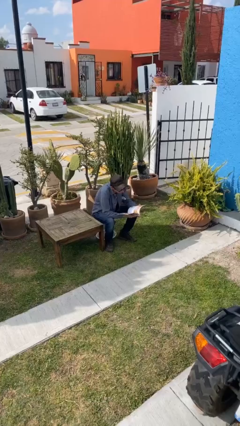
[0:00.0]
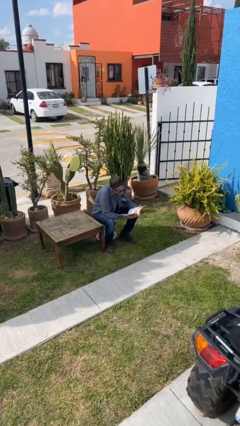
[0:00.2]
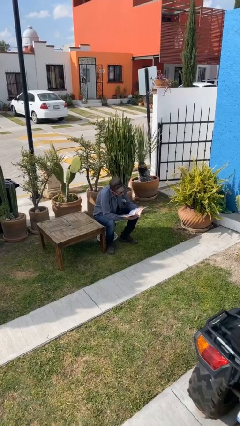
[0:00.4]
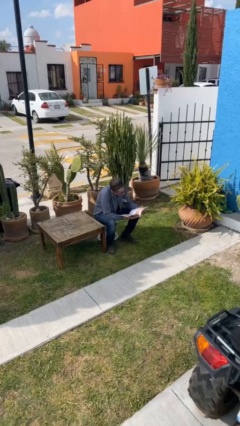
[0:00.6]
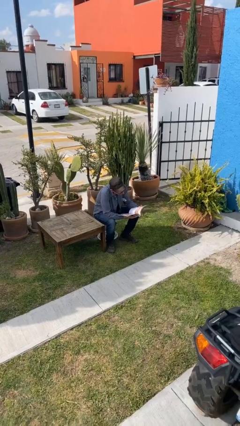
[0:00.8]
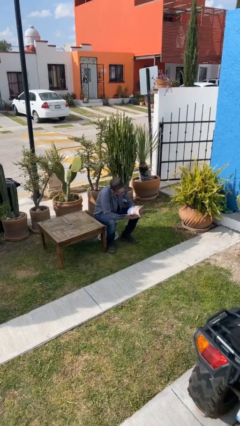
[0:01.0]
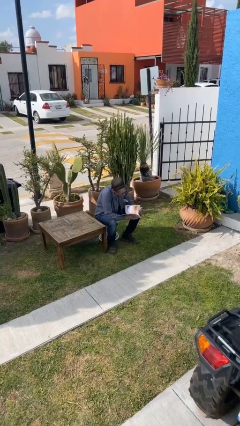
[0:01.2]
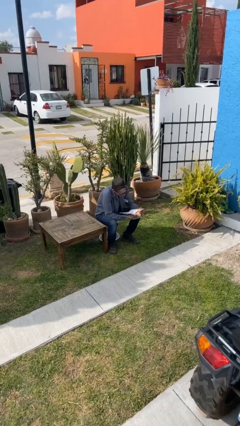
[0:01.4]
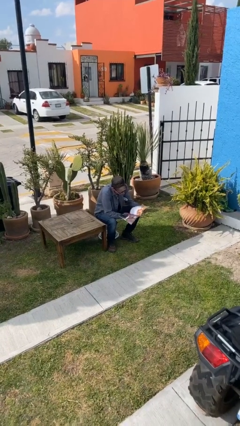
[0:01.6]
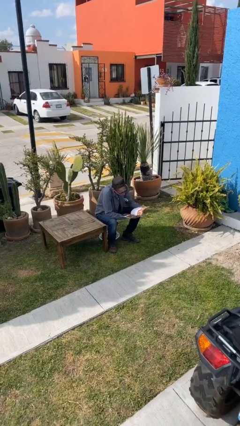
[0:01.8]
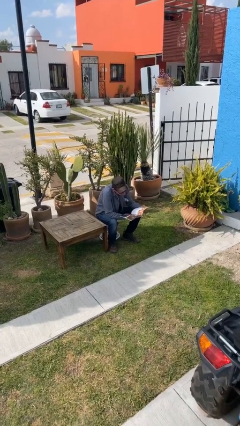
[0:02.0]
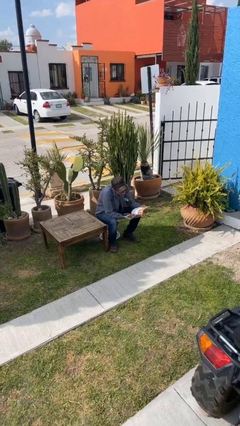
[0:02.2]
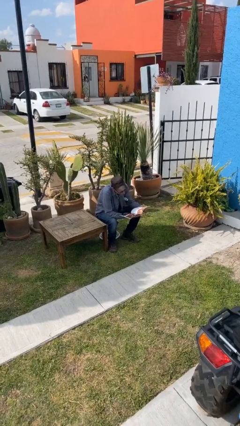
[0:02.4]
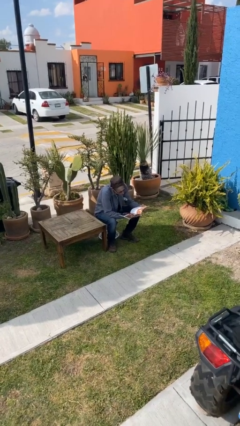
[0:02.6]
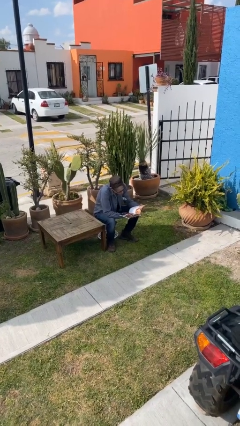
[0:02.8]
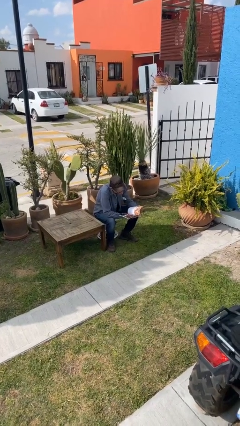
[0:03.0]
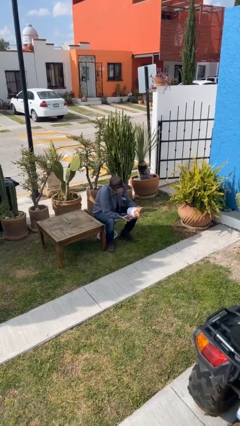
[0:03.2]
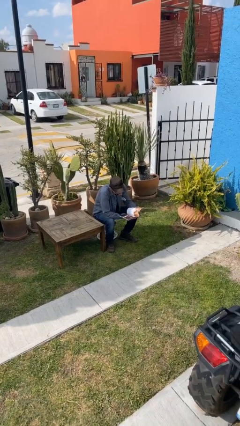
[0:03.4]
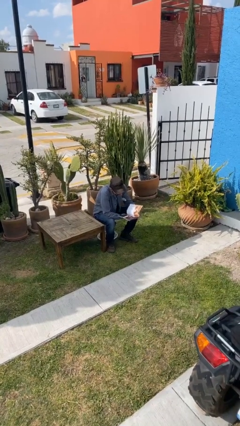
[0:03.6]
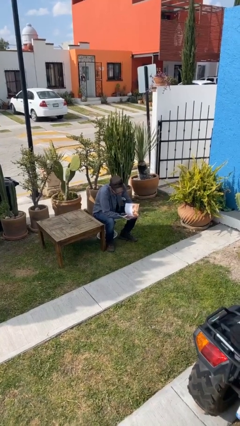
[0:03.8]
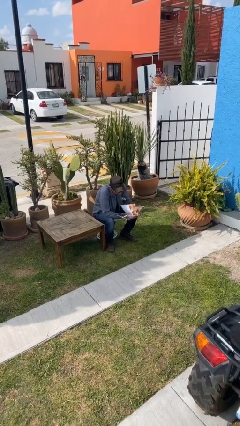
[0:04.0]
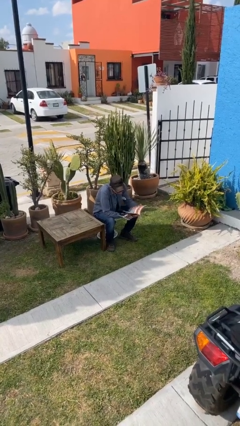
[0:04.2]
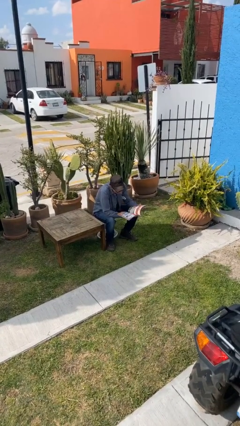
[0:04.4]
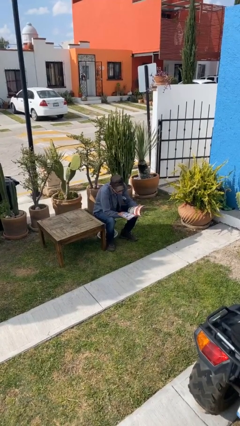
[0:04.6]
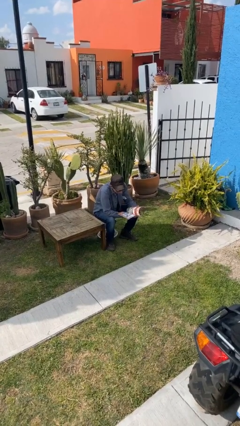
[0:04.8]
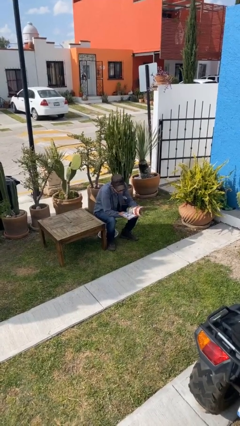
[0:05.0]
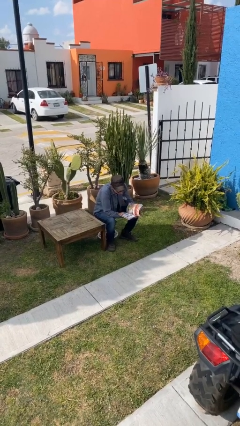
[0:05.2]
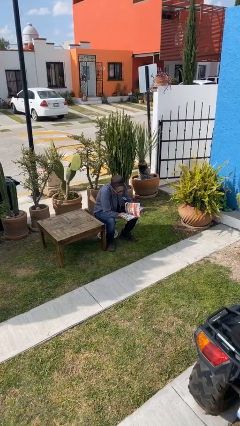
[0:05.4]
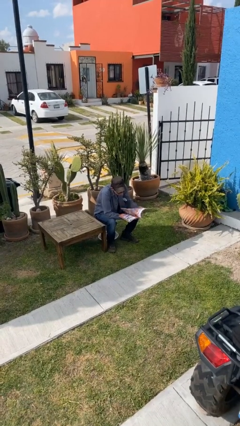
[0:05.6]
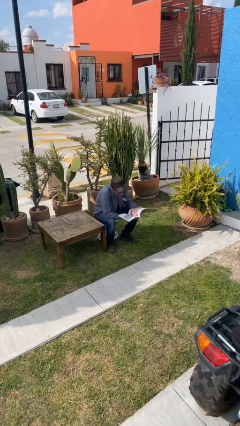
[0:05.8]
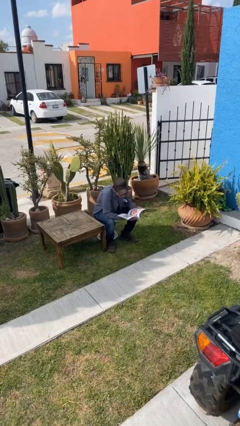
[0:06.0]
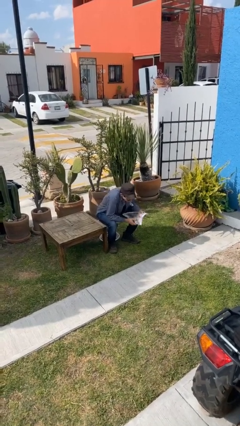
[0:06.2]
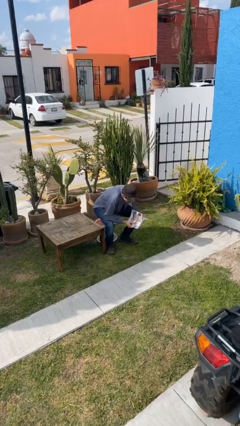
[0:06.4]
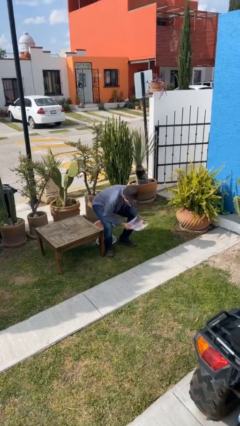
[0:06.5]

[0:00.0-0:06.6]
person reads document

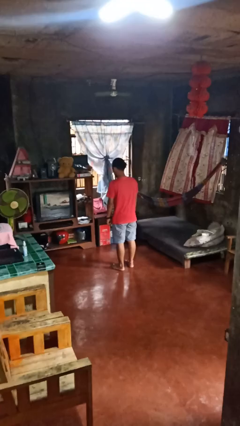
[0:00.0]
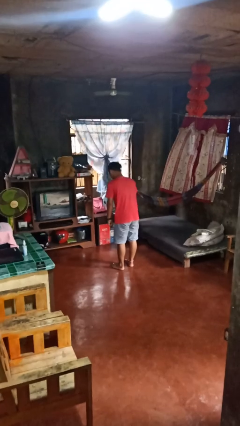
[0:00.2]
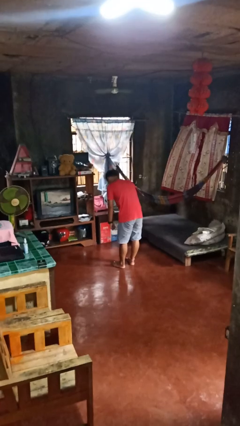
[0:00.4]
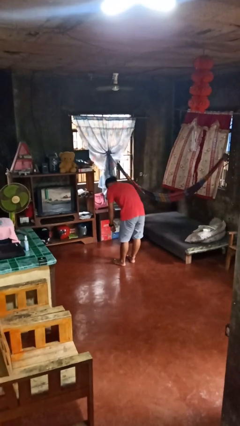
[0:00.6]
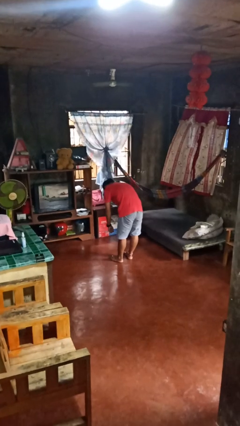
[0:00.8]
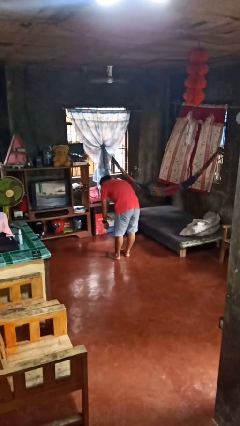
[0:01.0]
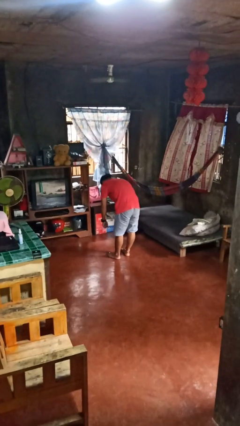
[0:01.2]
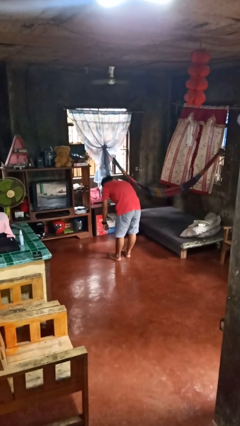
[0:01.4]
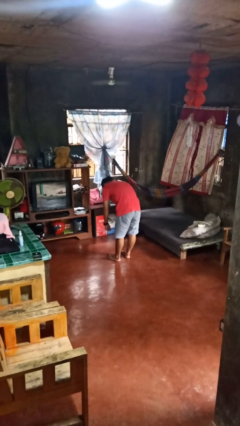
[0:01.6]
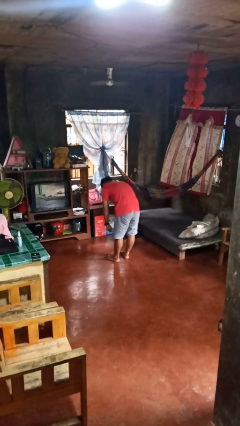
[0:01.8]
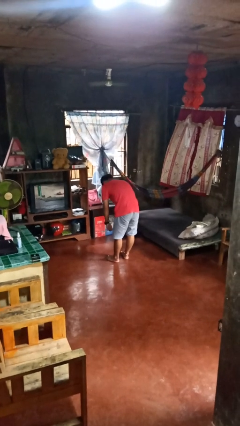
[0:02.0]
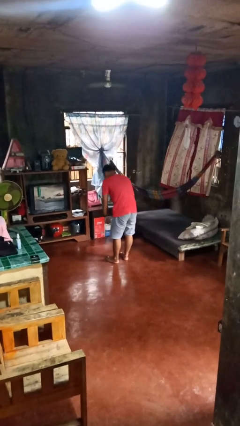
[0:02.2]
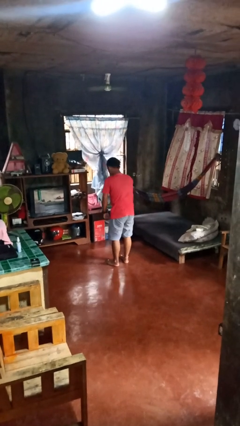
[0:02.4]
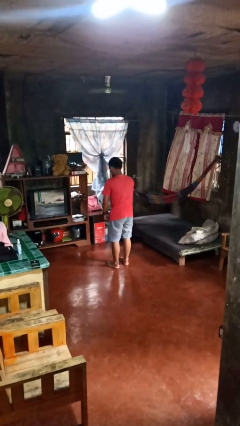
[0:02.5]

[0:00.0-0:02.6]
person bows

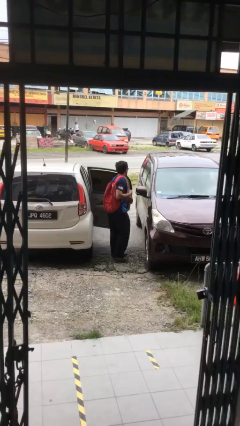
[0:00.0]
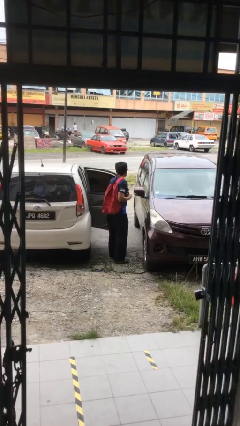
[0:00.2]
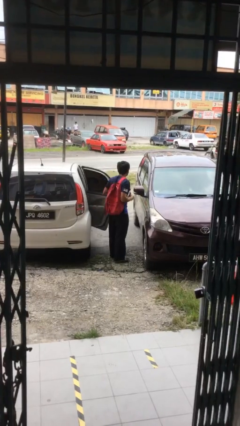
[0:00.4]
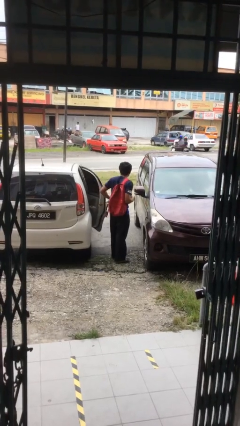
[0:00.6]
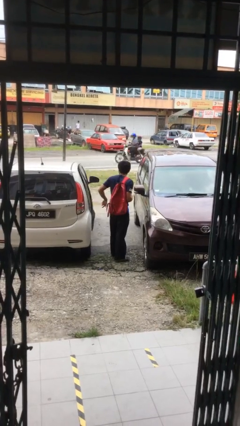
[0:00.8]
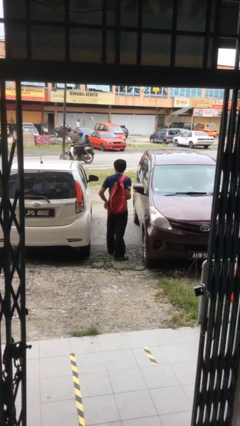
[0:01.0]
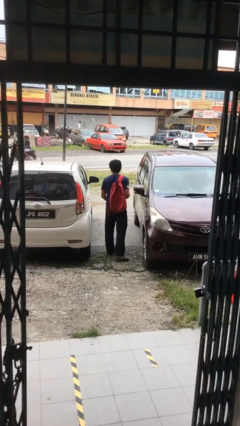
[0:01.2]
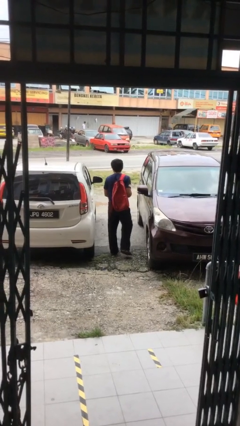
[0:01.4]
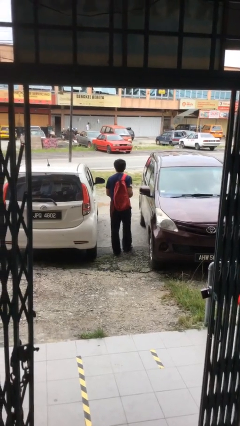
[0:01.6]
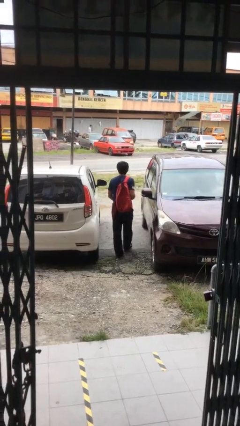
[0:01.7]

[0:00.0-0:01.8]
person closes car door

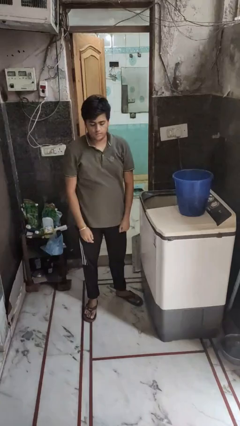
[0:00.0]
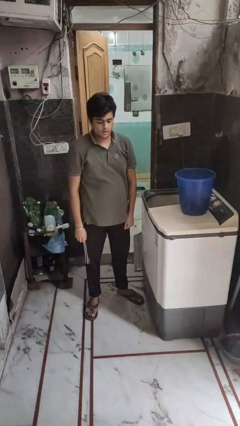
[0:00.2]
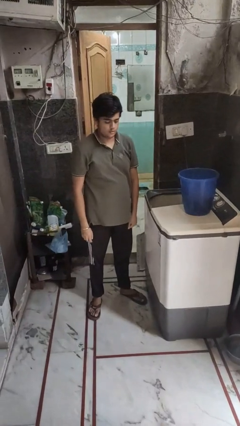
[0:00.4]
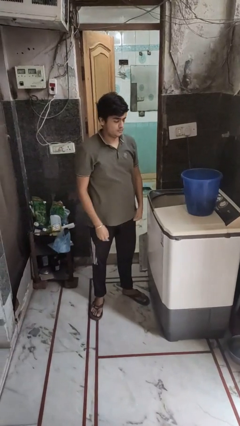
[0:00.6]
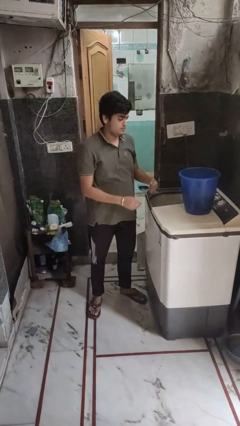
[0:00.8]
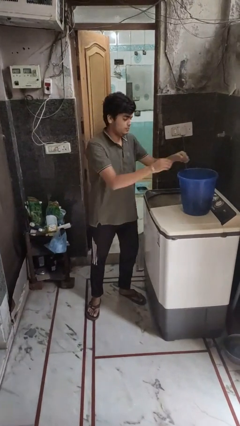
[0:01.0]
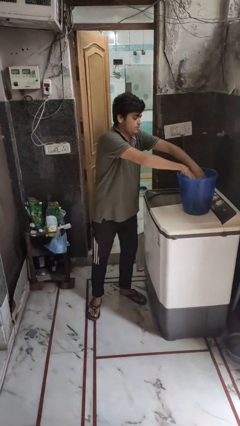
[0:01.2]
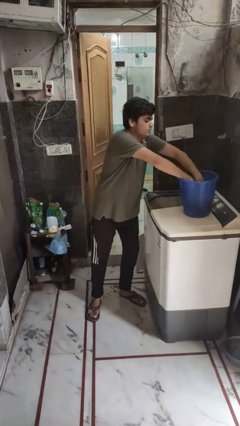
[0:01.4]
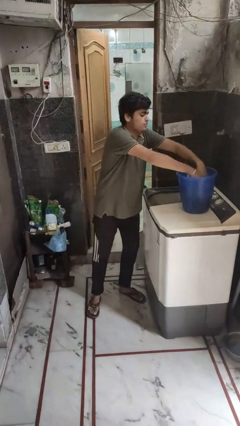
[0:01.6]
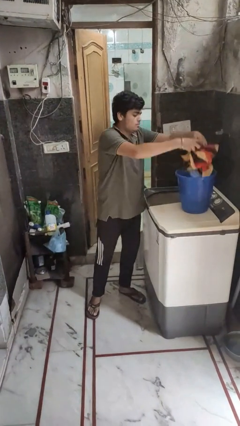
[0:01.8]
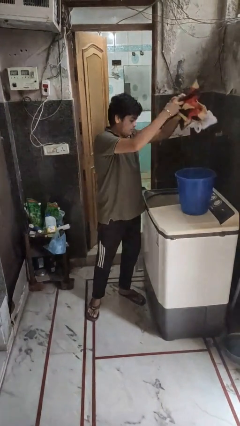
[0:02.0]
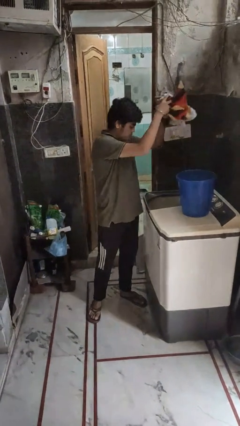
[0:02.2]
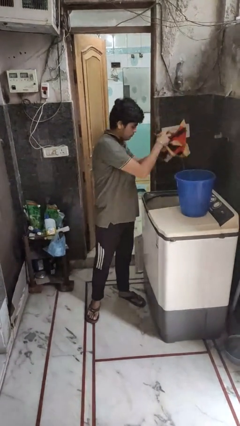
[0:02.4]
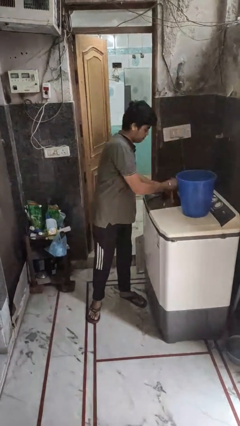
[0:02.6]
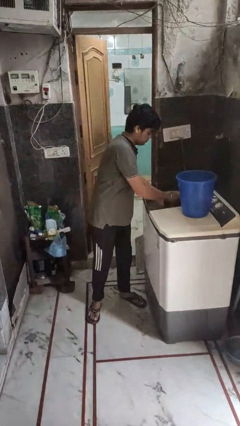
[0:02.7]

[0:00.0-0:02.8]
person loads clotheswasher

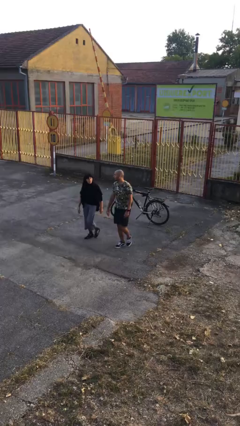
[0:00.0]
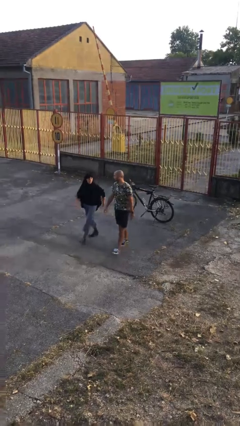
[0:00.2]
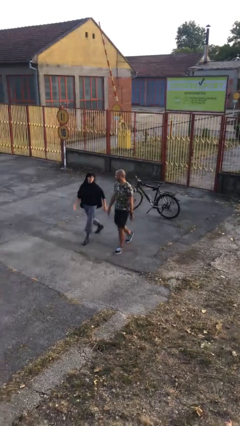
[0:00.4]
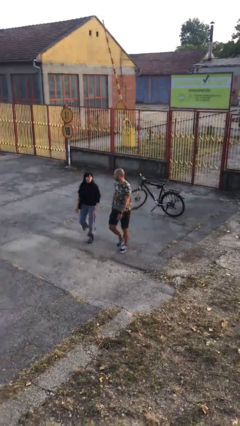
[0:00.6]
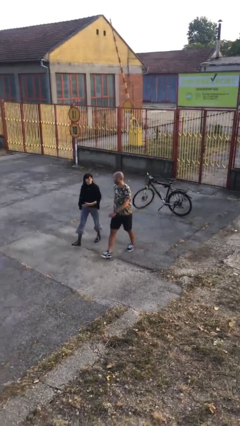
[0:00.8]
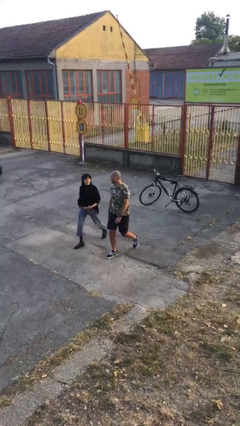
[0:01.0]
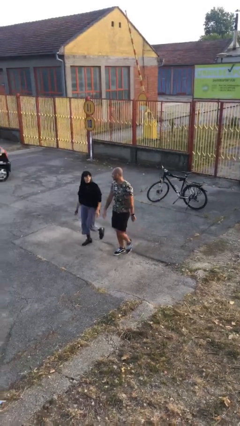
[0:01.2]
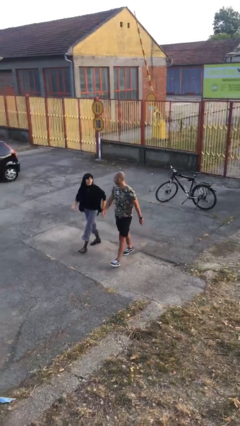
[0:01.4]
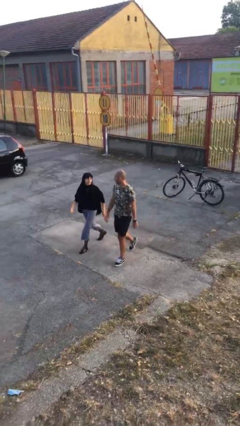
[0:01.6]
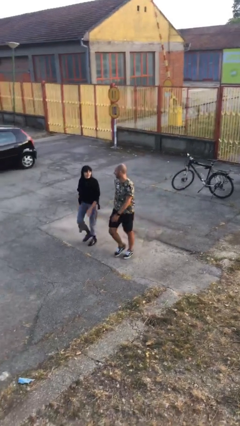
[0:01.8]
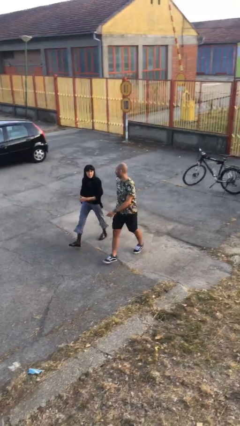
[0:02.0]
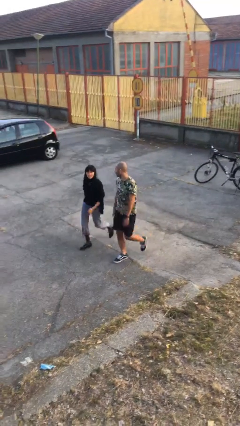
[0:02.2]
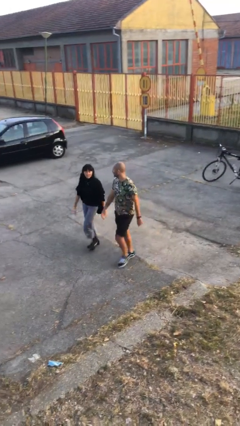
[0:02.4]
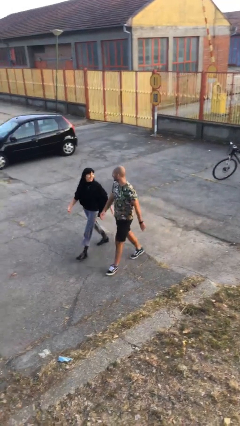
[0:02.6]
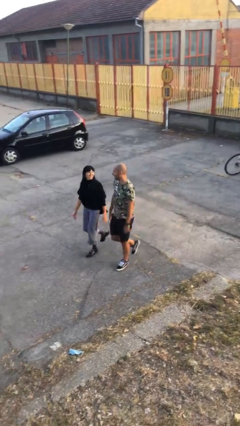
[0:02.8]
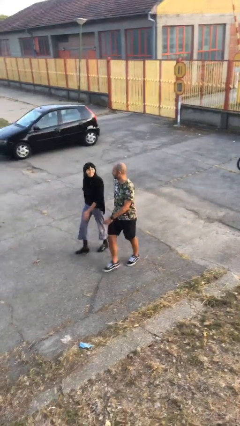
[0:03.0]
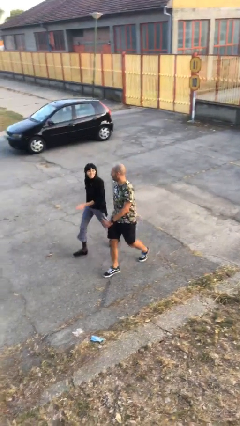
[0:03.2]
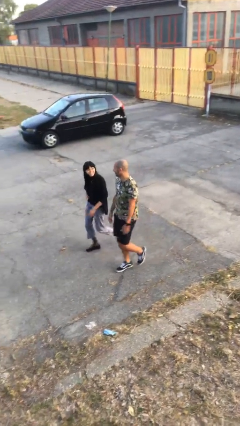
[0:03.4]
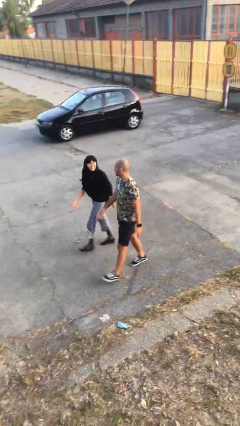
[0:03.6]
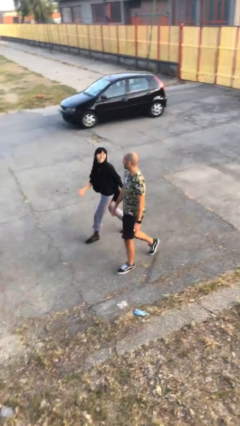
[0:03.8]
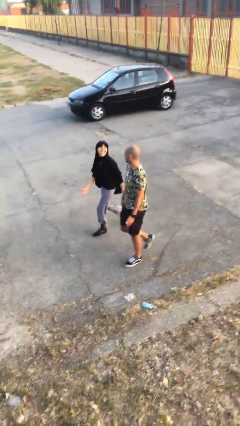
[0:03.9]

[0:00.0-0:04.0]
person talks to person
